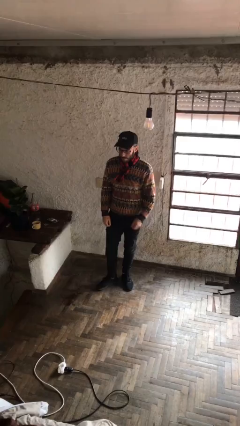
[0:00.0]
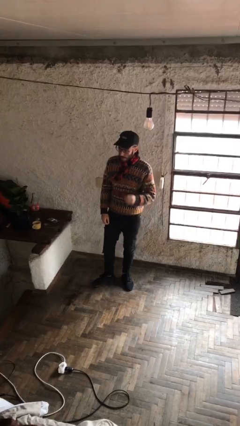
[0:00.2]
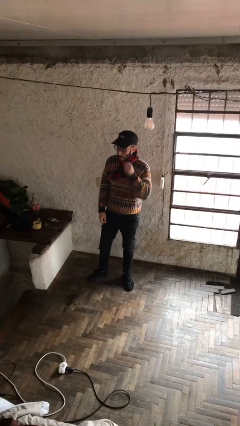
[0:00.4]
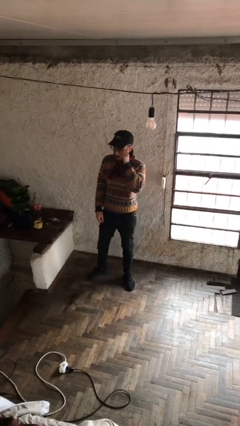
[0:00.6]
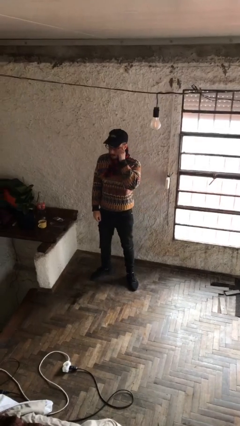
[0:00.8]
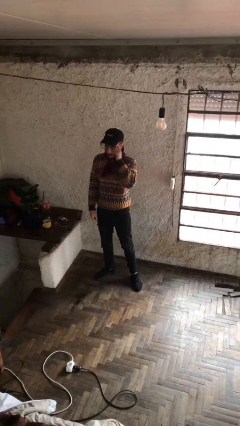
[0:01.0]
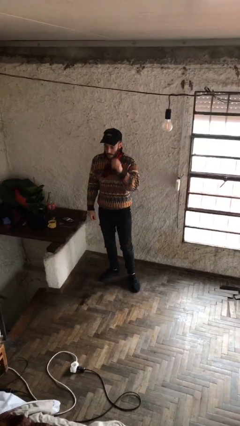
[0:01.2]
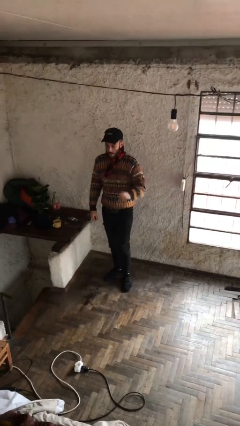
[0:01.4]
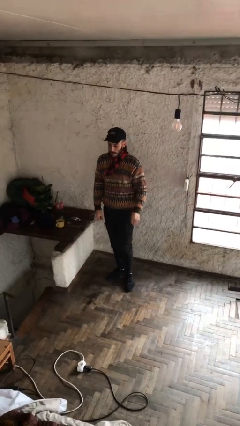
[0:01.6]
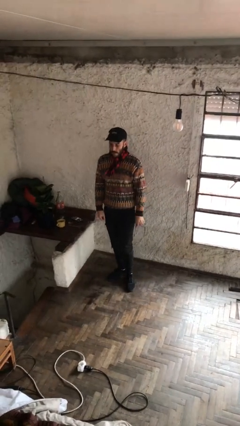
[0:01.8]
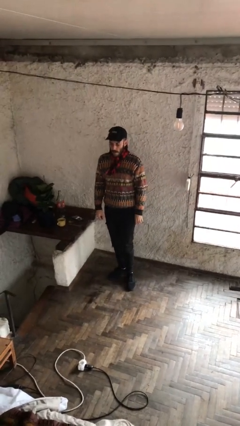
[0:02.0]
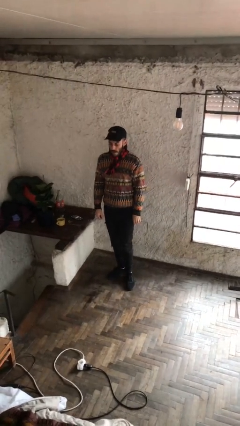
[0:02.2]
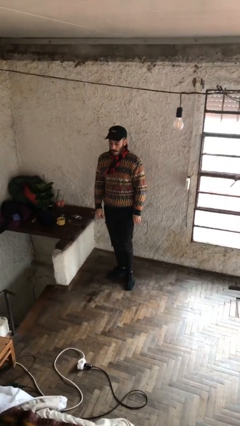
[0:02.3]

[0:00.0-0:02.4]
person takes off glasses

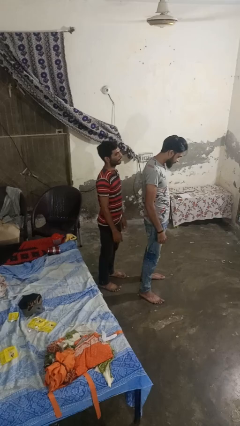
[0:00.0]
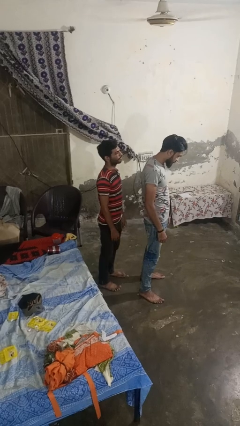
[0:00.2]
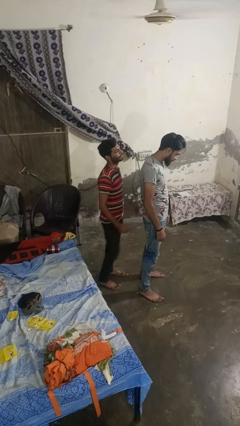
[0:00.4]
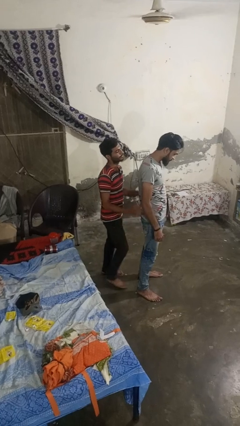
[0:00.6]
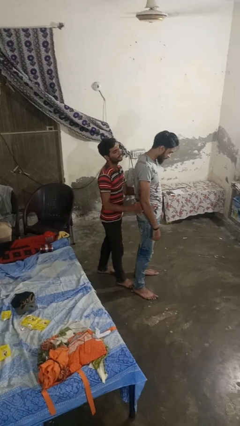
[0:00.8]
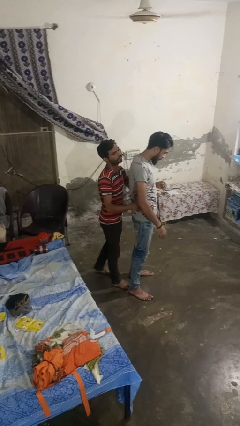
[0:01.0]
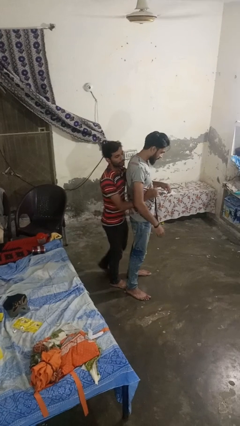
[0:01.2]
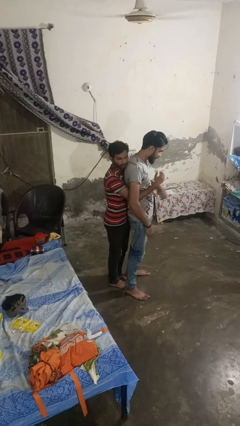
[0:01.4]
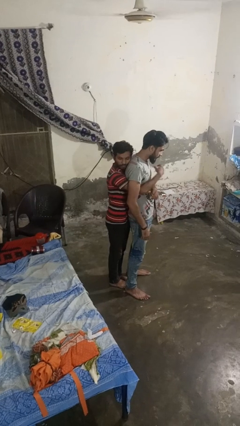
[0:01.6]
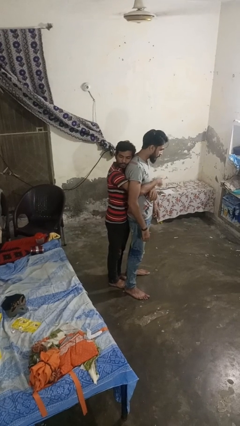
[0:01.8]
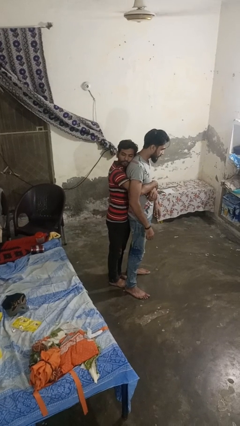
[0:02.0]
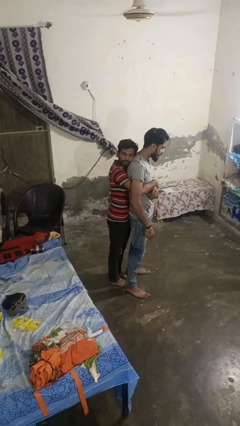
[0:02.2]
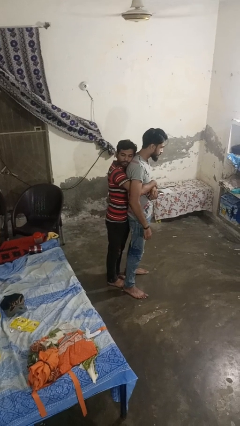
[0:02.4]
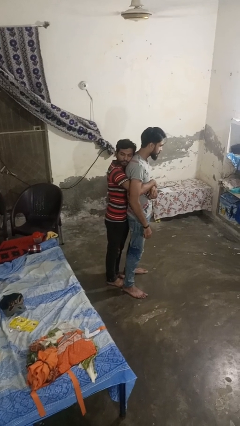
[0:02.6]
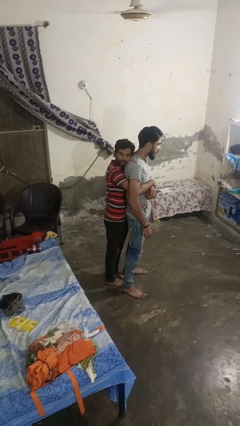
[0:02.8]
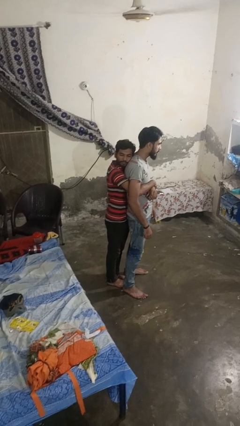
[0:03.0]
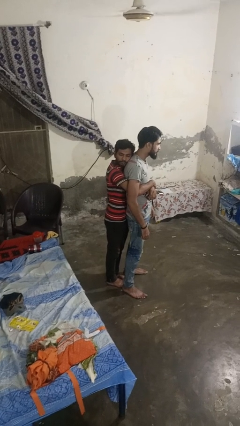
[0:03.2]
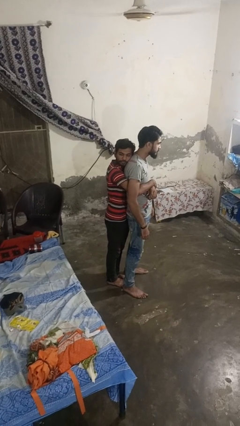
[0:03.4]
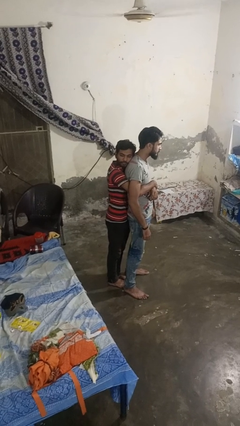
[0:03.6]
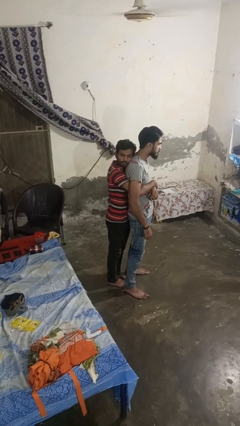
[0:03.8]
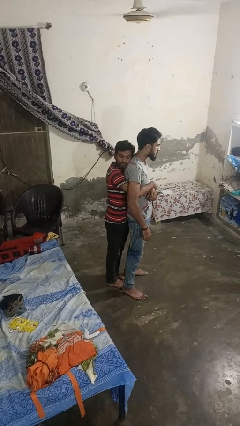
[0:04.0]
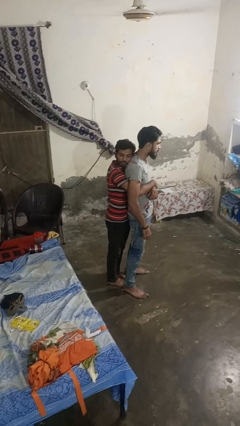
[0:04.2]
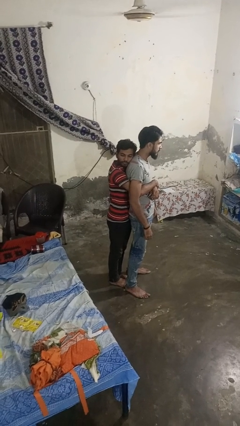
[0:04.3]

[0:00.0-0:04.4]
person hugs person from behind

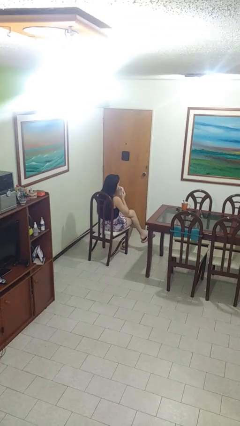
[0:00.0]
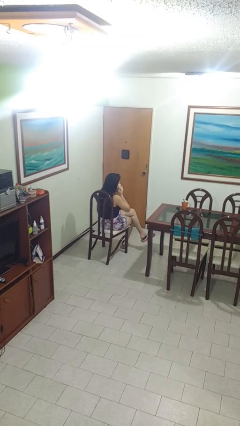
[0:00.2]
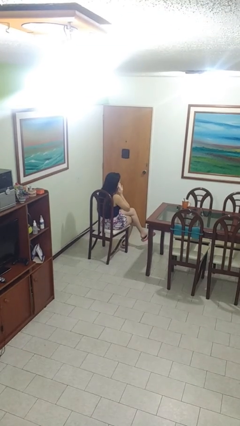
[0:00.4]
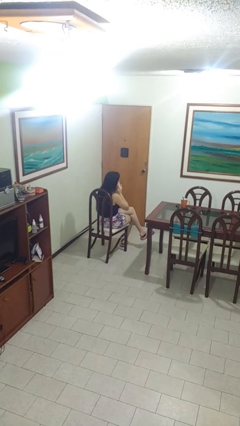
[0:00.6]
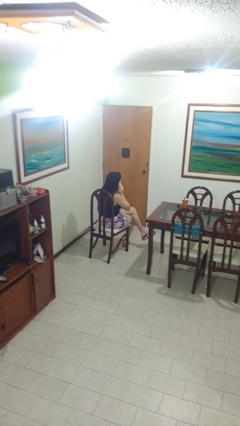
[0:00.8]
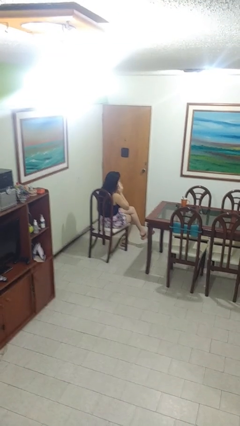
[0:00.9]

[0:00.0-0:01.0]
person blows nose

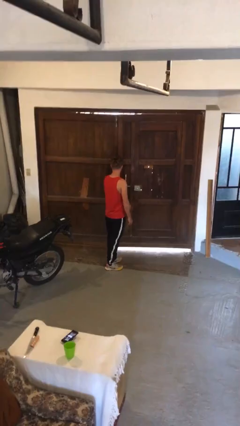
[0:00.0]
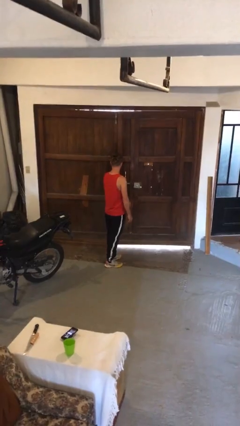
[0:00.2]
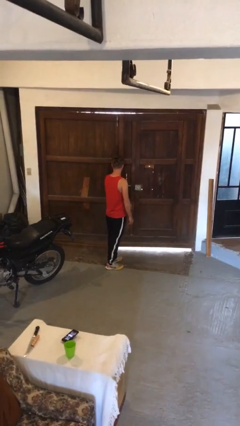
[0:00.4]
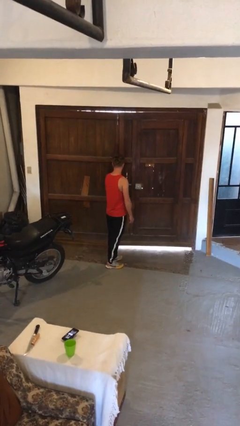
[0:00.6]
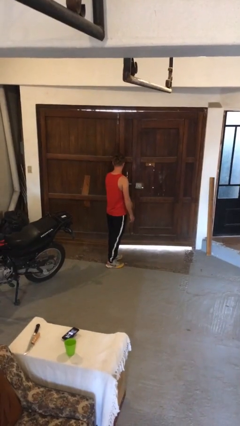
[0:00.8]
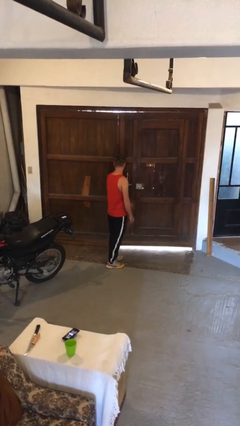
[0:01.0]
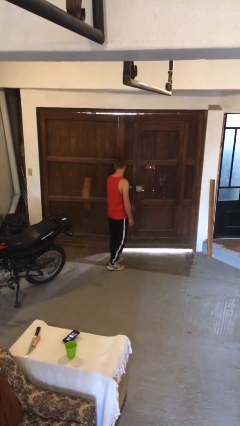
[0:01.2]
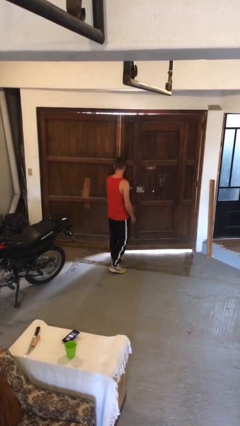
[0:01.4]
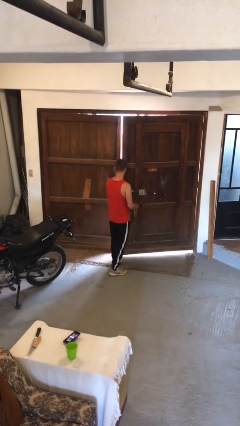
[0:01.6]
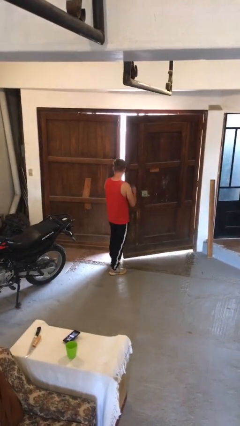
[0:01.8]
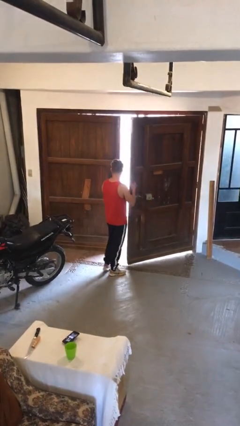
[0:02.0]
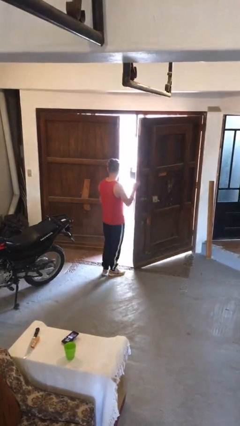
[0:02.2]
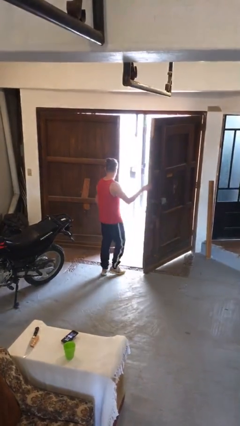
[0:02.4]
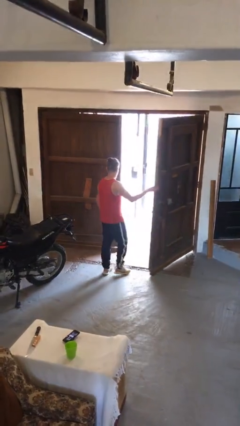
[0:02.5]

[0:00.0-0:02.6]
person opens gate

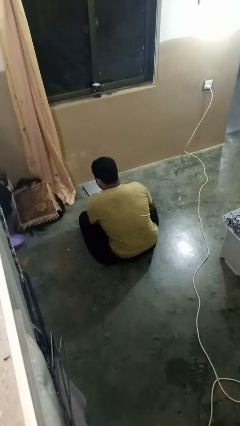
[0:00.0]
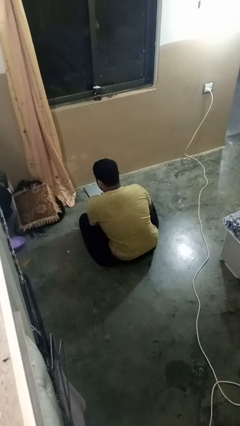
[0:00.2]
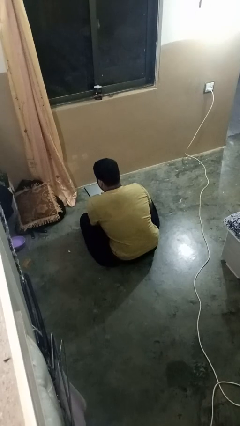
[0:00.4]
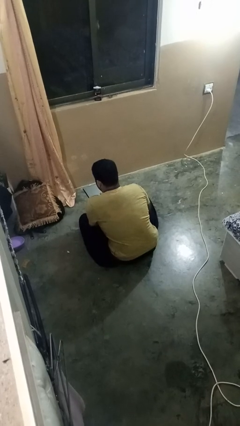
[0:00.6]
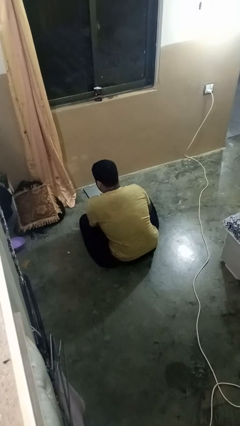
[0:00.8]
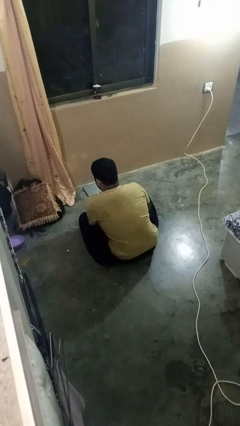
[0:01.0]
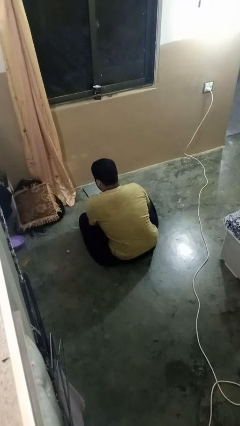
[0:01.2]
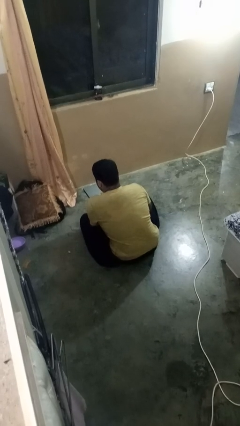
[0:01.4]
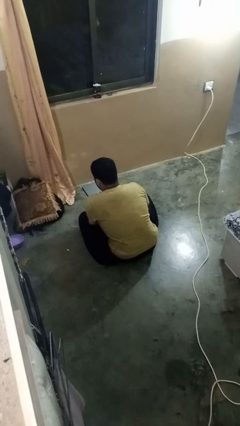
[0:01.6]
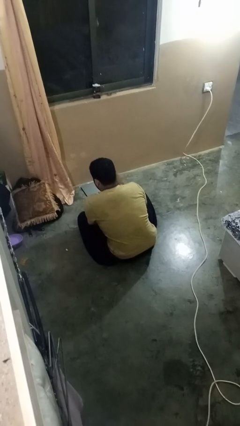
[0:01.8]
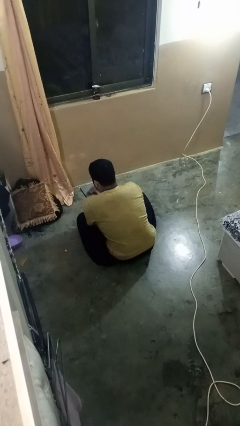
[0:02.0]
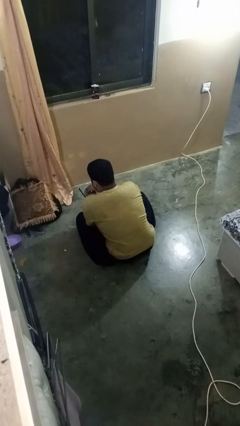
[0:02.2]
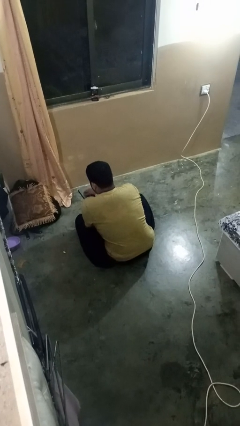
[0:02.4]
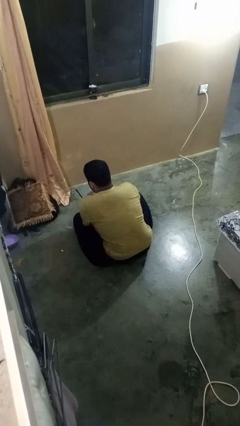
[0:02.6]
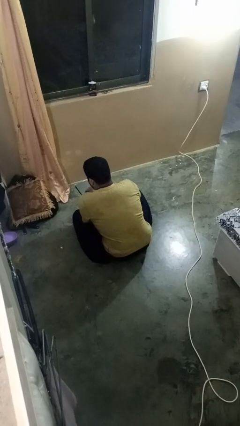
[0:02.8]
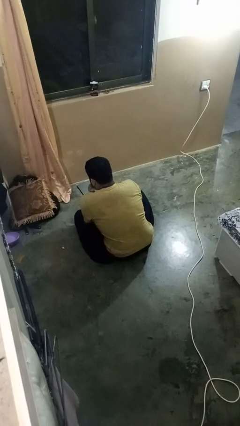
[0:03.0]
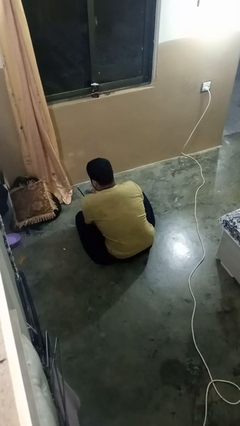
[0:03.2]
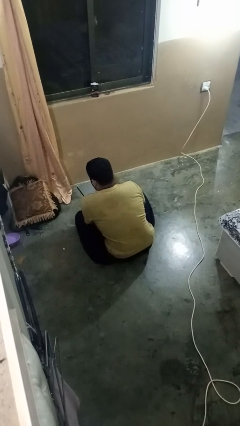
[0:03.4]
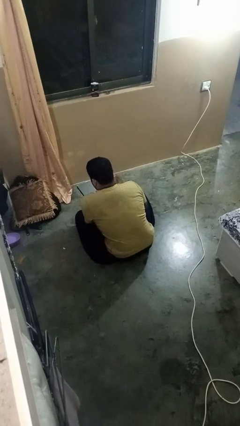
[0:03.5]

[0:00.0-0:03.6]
person interacts with tablet

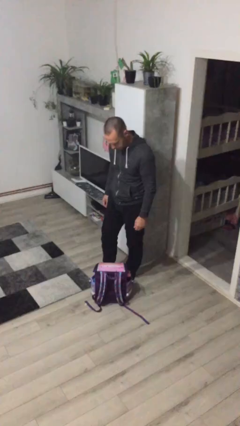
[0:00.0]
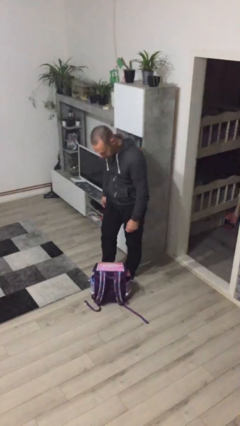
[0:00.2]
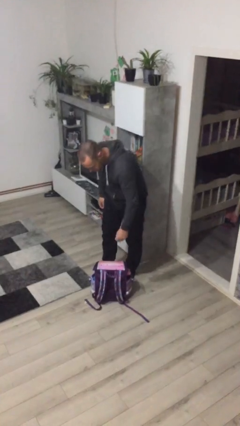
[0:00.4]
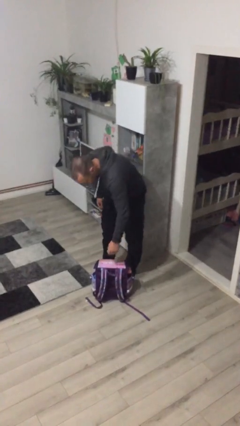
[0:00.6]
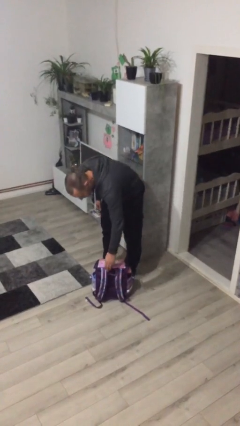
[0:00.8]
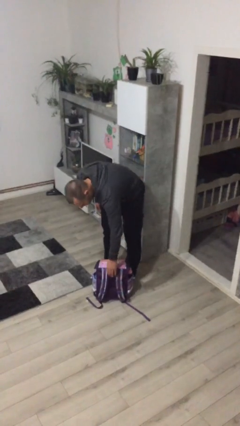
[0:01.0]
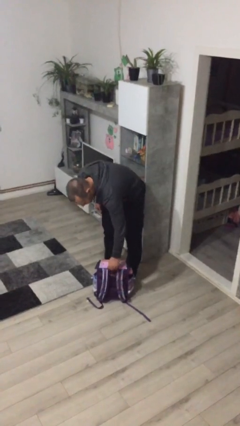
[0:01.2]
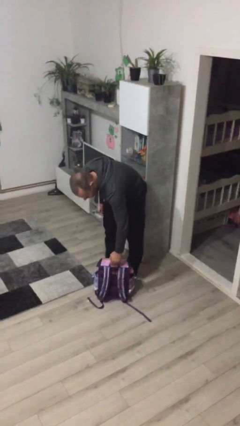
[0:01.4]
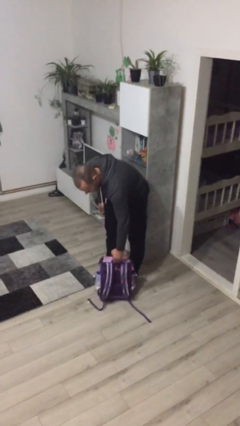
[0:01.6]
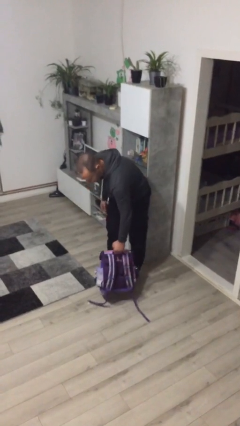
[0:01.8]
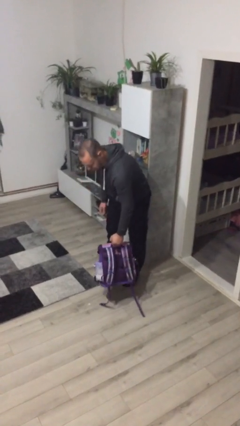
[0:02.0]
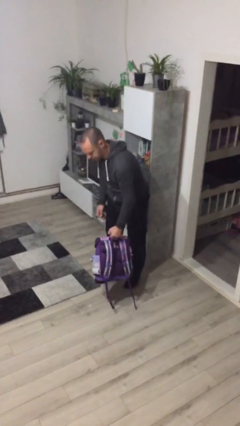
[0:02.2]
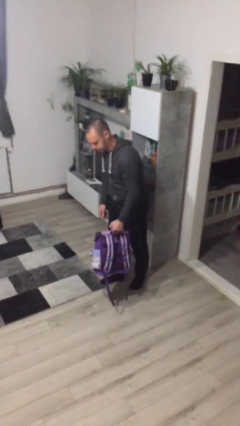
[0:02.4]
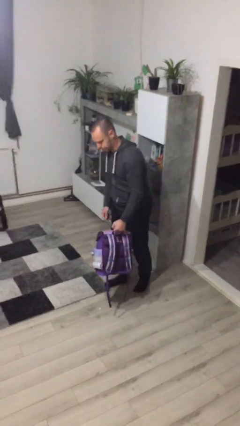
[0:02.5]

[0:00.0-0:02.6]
person picks up object from floor

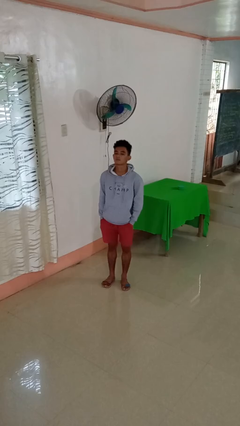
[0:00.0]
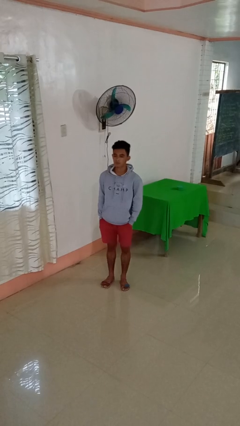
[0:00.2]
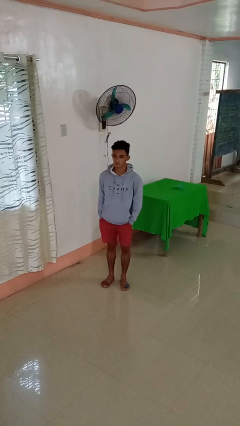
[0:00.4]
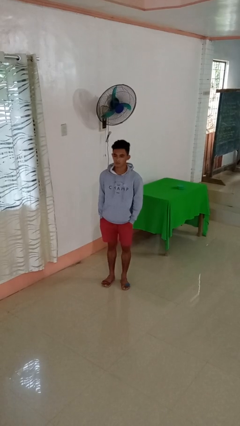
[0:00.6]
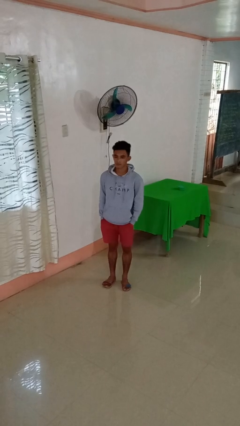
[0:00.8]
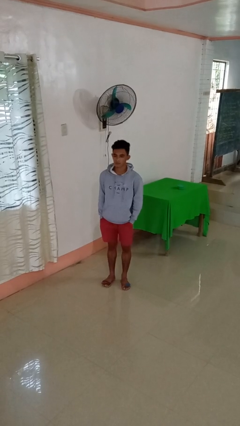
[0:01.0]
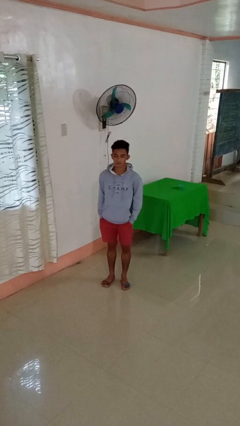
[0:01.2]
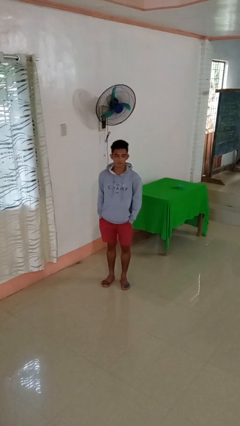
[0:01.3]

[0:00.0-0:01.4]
person nods head
